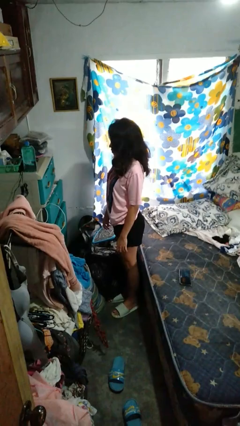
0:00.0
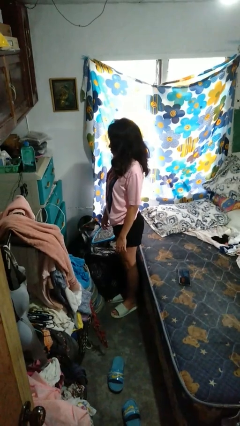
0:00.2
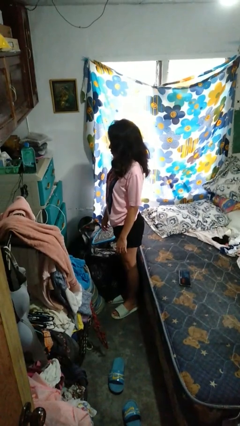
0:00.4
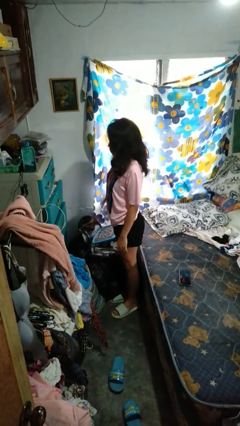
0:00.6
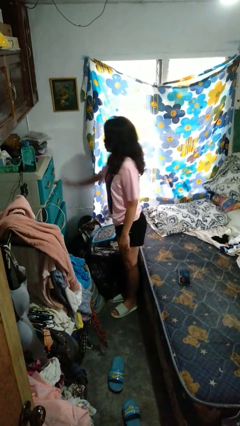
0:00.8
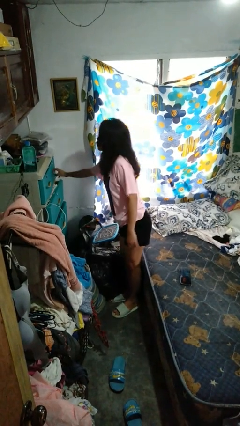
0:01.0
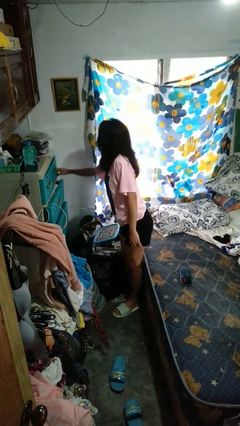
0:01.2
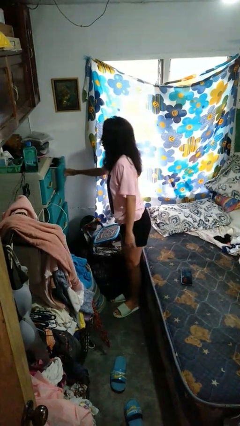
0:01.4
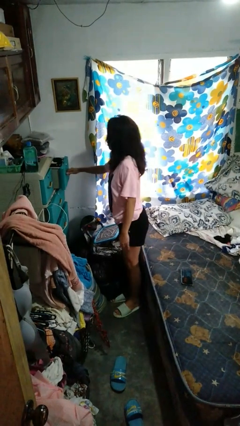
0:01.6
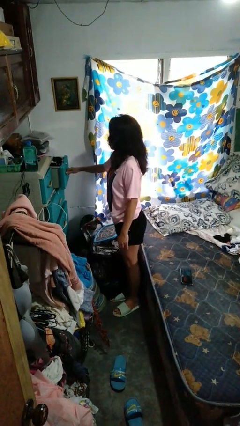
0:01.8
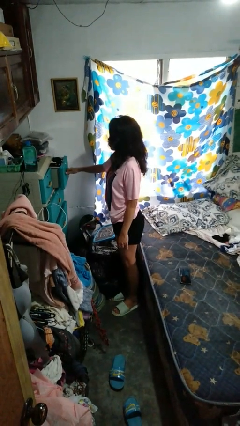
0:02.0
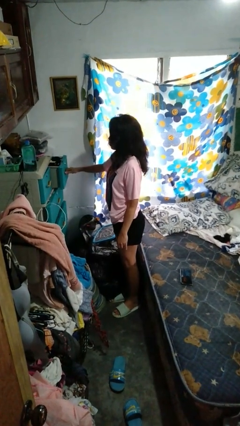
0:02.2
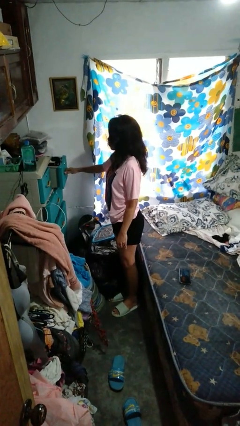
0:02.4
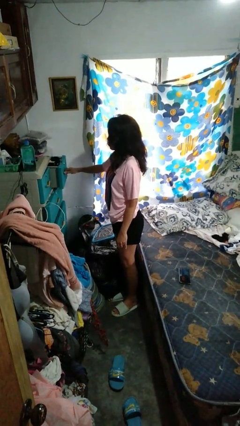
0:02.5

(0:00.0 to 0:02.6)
person opens dresser drawer

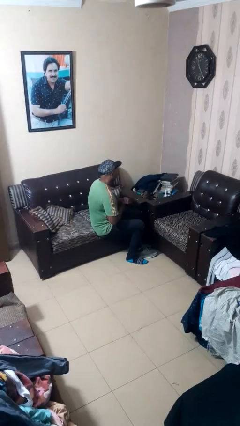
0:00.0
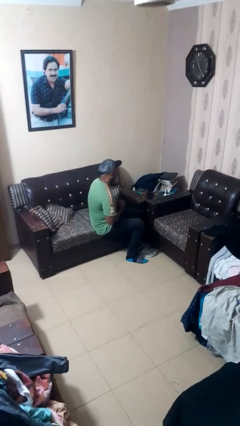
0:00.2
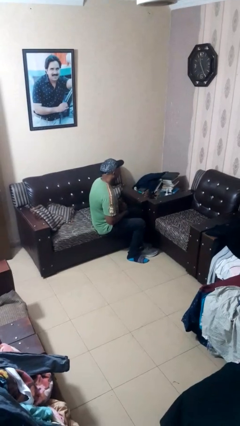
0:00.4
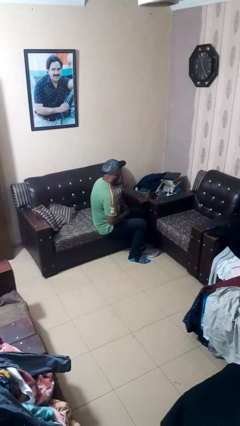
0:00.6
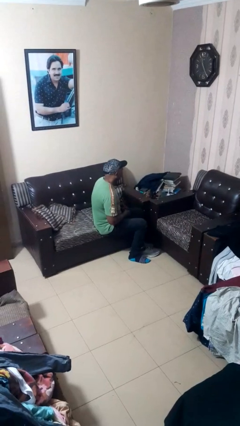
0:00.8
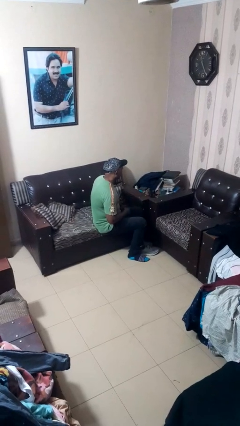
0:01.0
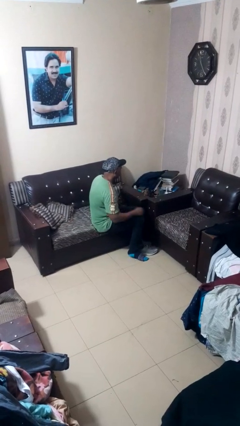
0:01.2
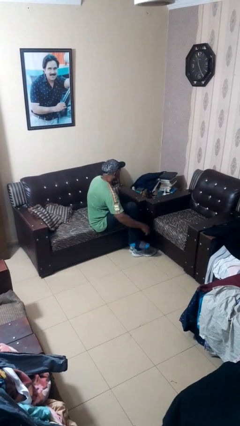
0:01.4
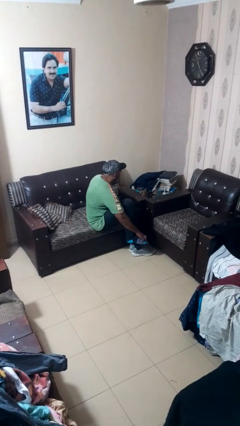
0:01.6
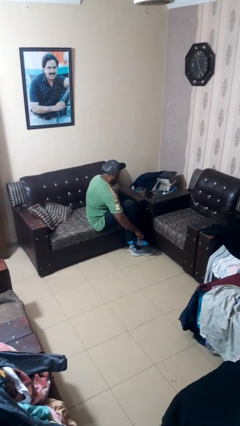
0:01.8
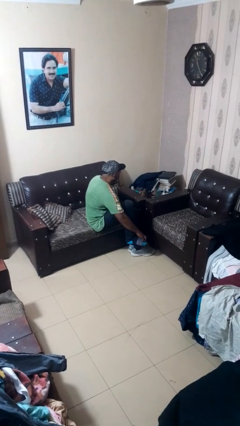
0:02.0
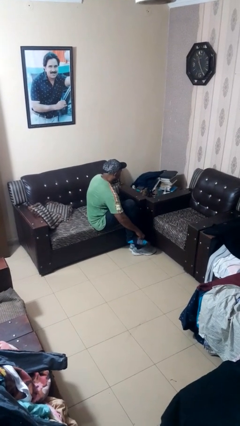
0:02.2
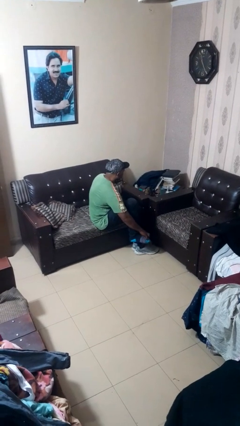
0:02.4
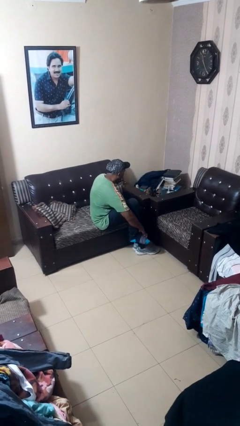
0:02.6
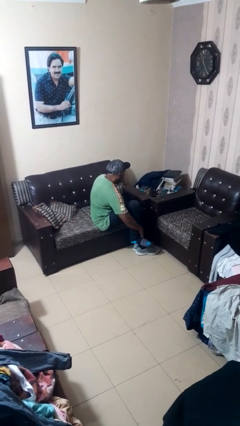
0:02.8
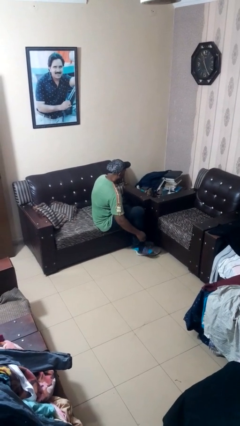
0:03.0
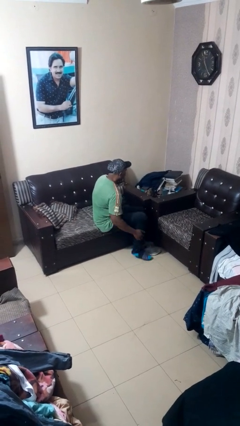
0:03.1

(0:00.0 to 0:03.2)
person rubs foot

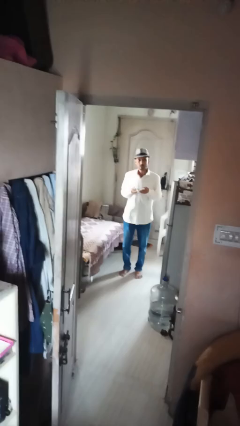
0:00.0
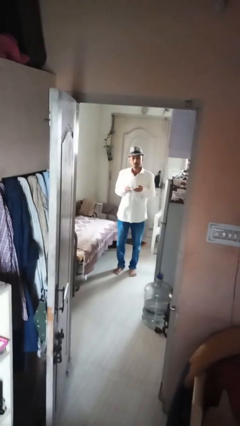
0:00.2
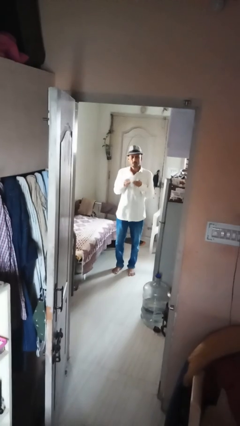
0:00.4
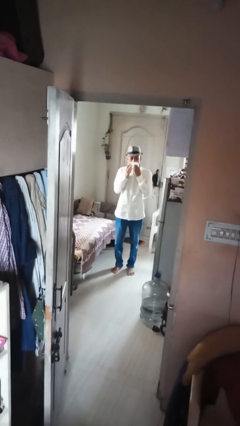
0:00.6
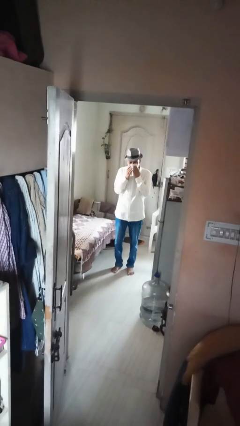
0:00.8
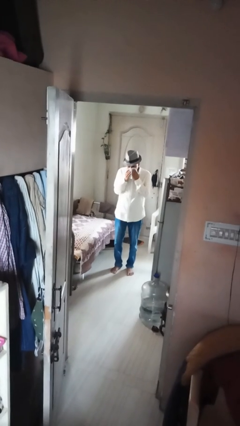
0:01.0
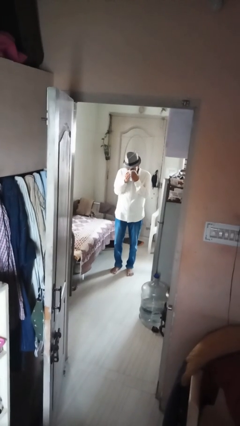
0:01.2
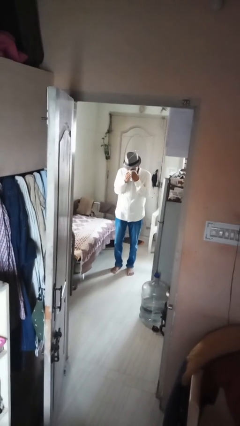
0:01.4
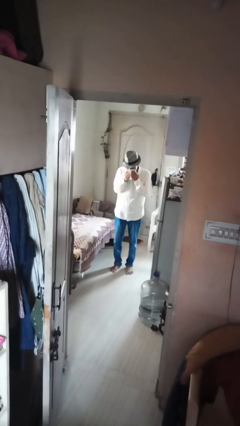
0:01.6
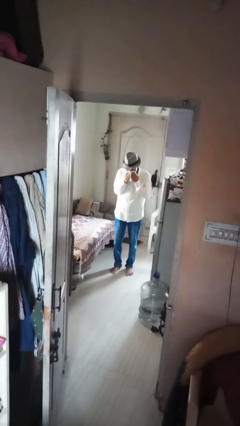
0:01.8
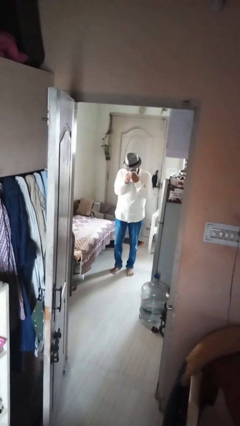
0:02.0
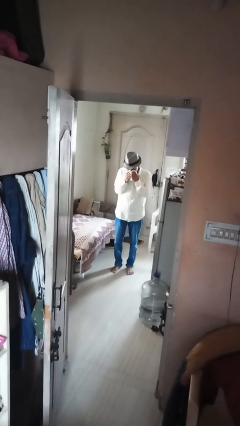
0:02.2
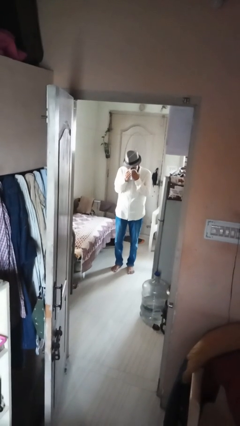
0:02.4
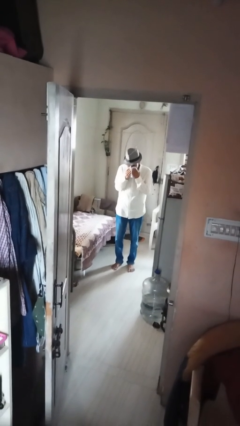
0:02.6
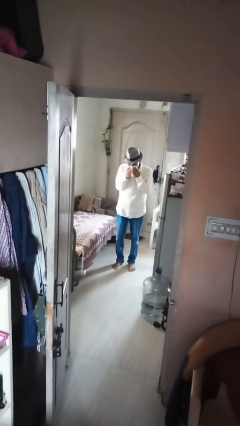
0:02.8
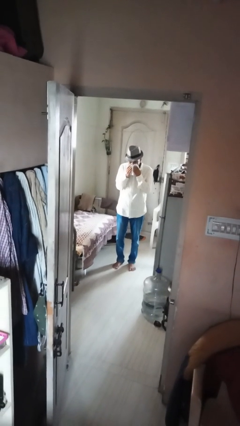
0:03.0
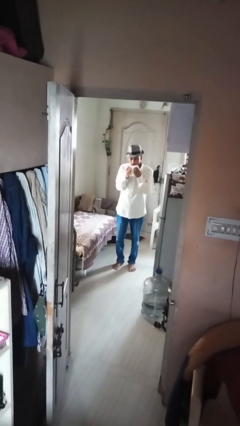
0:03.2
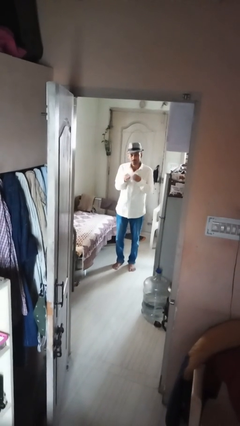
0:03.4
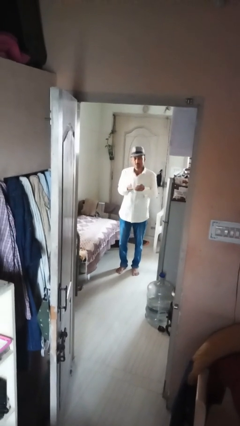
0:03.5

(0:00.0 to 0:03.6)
person blows nose

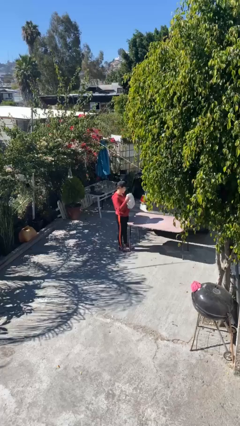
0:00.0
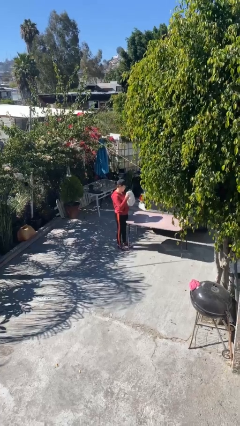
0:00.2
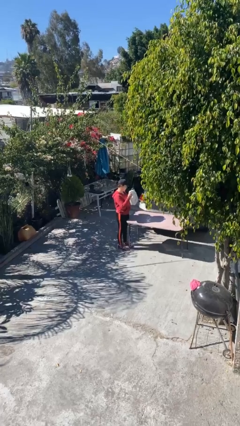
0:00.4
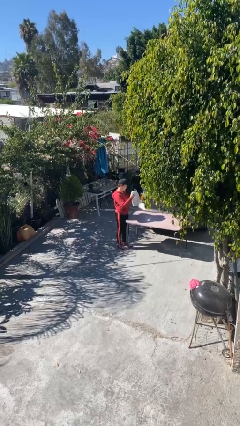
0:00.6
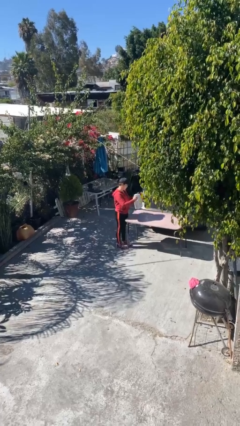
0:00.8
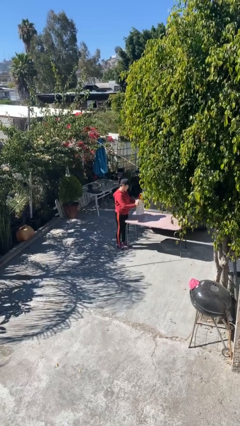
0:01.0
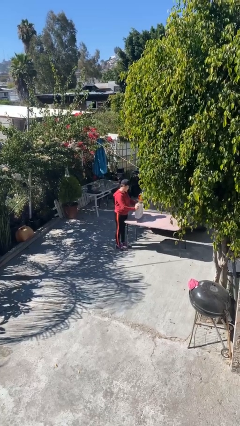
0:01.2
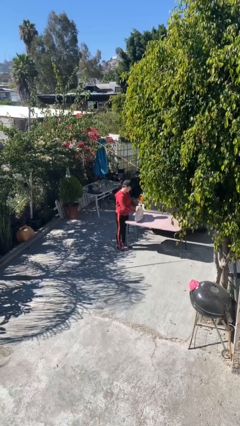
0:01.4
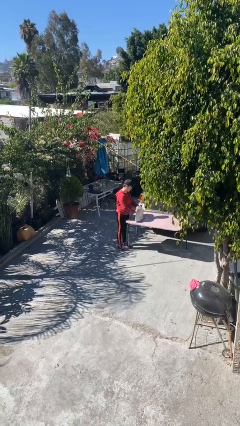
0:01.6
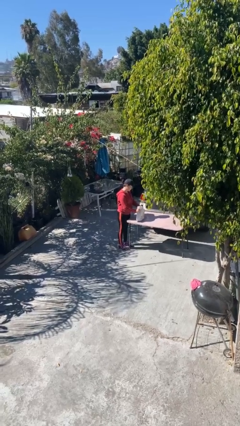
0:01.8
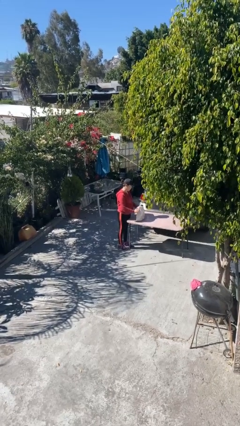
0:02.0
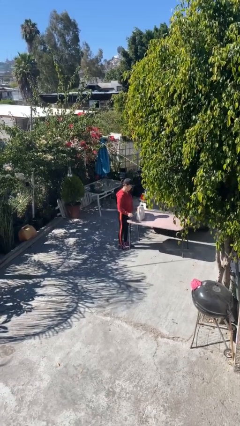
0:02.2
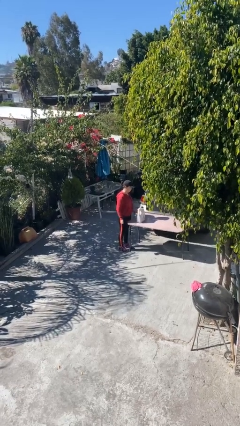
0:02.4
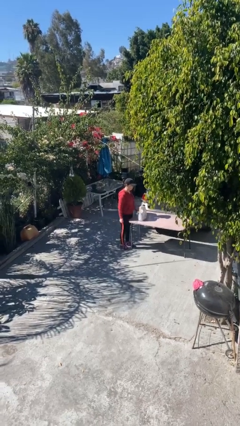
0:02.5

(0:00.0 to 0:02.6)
person puts down object on table

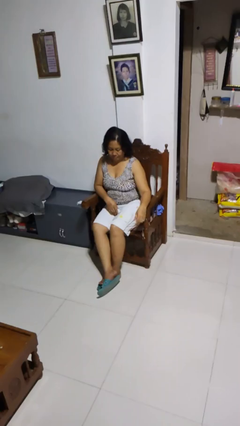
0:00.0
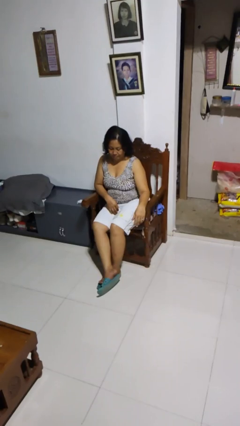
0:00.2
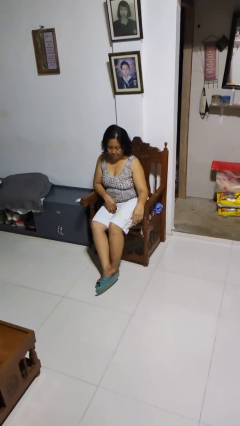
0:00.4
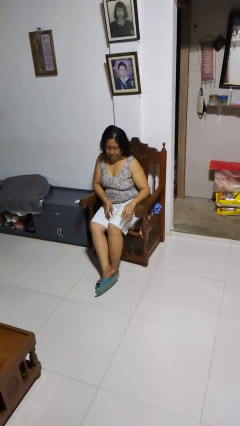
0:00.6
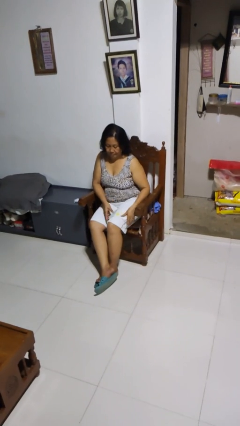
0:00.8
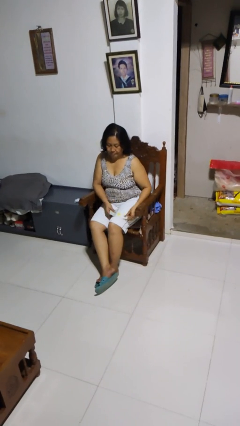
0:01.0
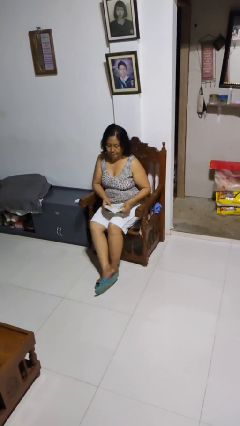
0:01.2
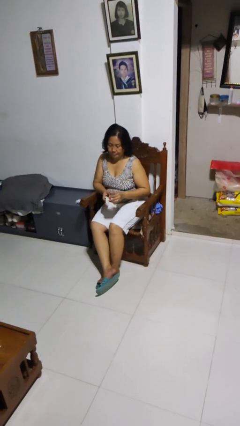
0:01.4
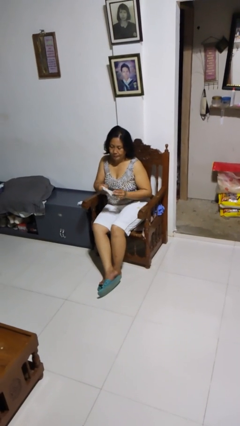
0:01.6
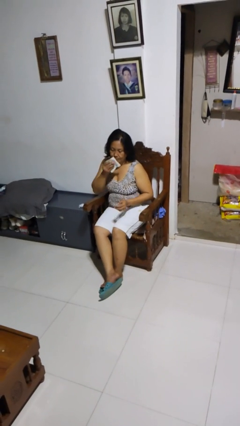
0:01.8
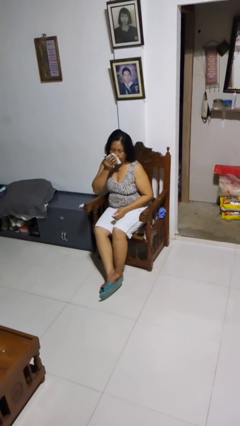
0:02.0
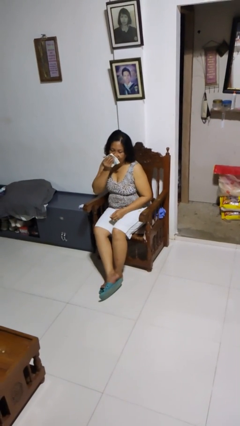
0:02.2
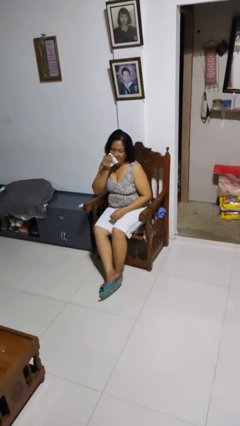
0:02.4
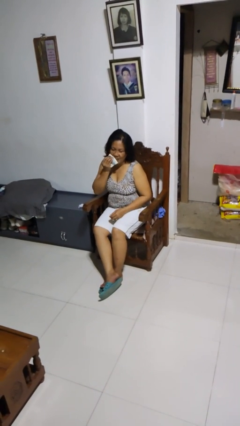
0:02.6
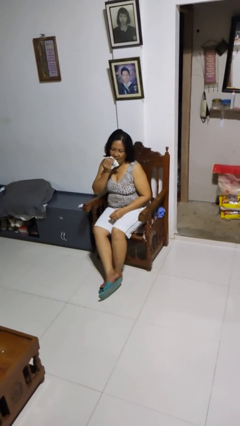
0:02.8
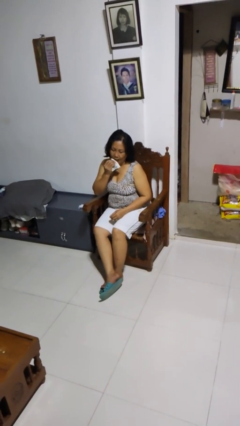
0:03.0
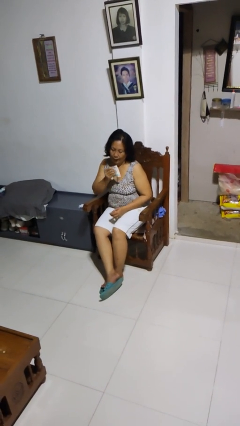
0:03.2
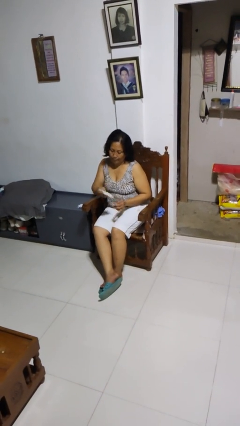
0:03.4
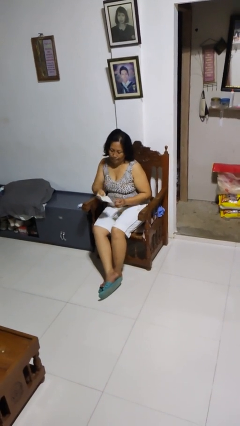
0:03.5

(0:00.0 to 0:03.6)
person wipes mouth with napkin

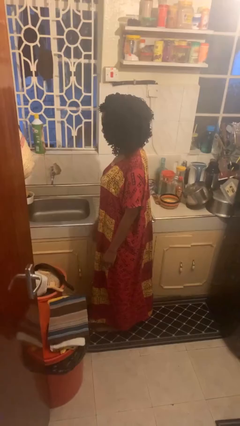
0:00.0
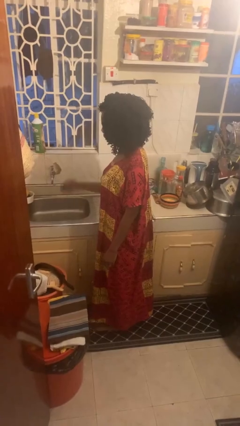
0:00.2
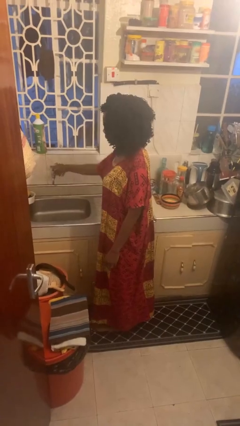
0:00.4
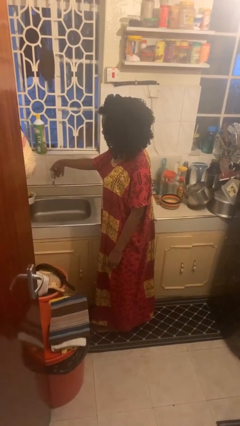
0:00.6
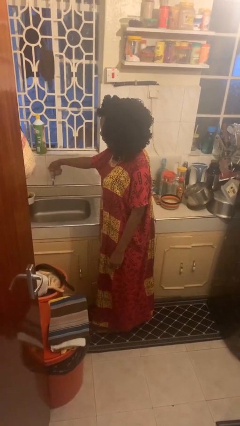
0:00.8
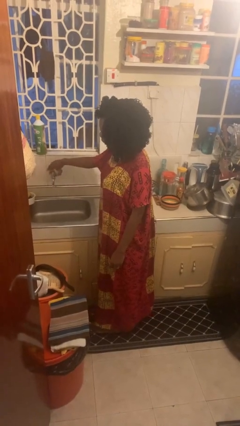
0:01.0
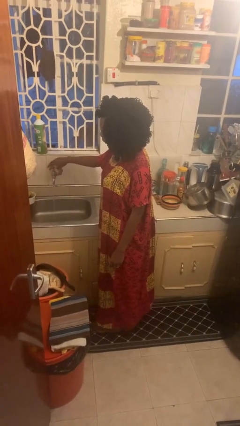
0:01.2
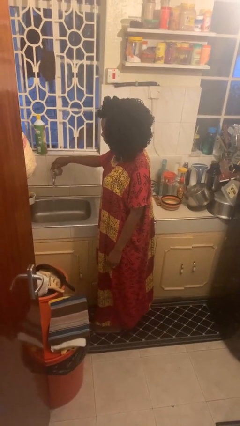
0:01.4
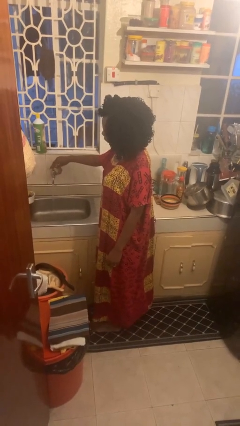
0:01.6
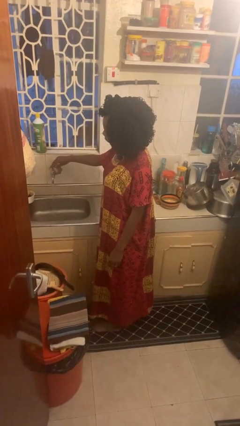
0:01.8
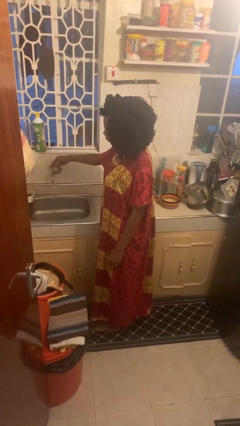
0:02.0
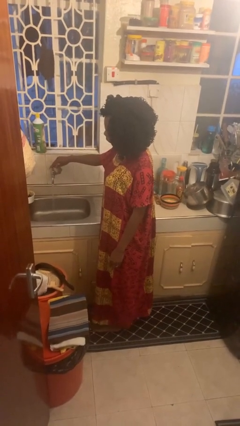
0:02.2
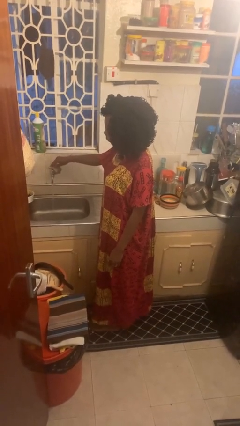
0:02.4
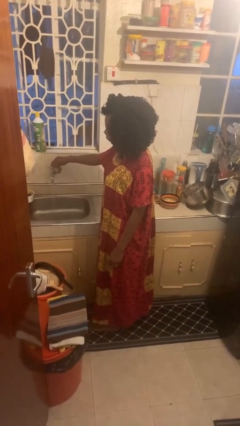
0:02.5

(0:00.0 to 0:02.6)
person turns on faucet
